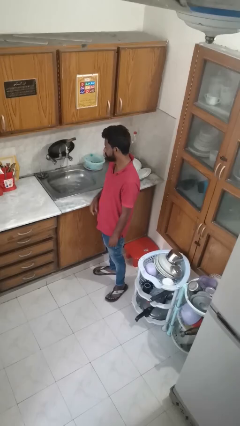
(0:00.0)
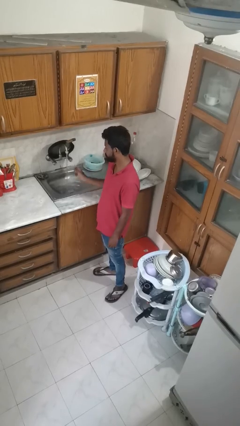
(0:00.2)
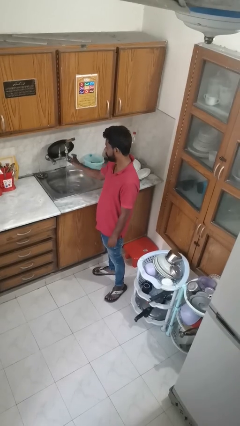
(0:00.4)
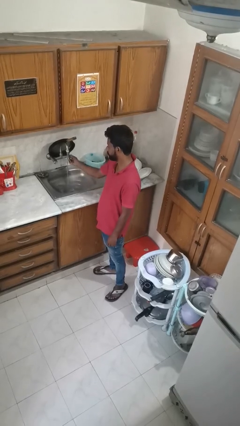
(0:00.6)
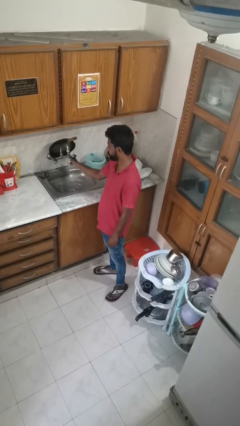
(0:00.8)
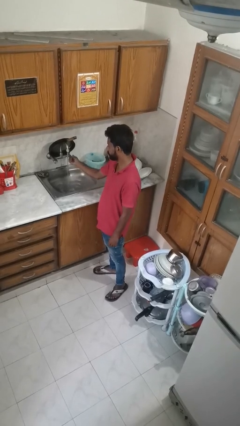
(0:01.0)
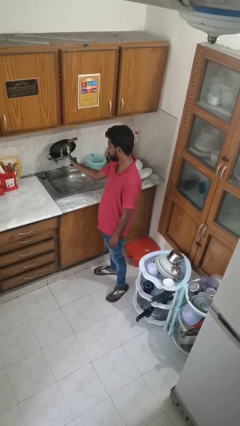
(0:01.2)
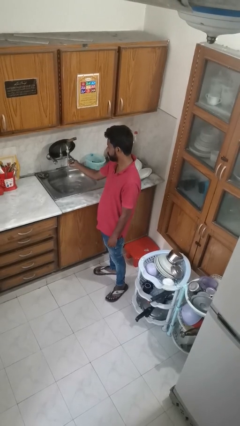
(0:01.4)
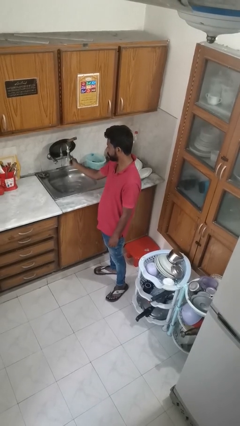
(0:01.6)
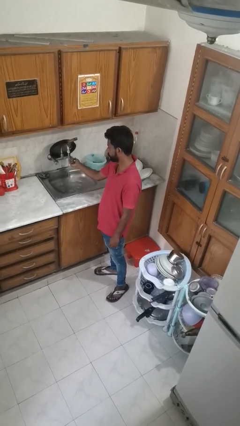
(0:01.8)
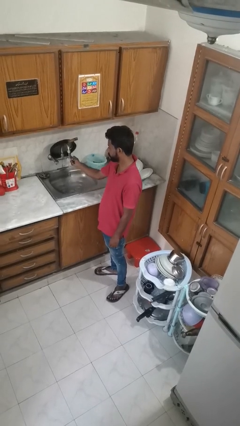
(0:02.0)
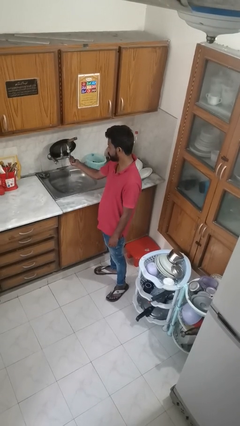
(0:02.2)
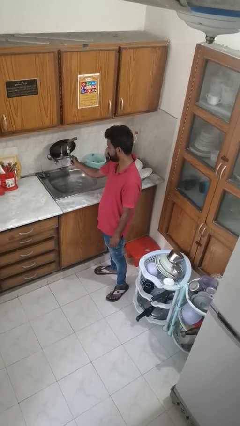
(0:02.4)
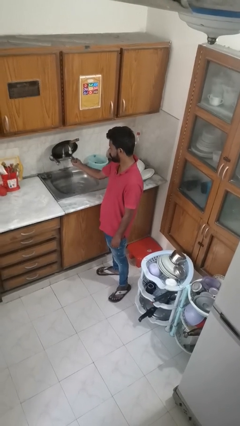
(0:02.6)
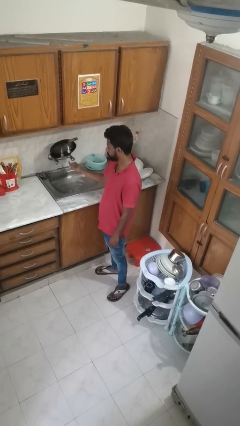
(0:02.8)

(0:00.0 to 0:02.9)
person turns off faucet

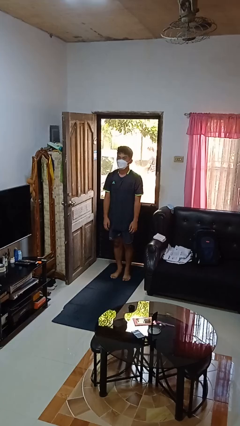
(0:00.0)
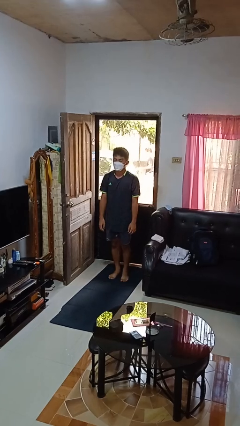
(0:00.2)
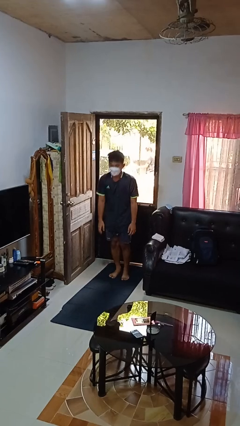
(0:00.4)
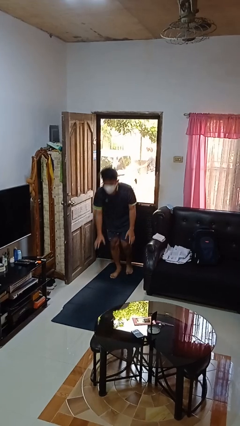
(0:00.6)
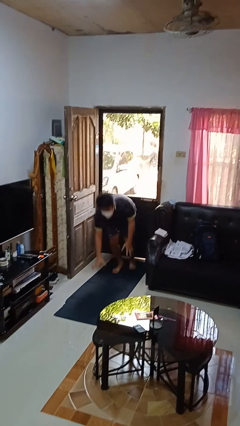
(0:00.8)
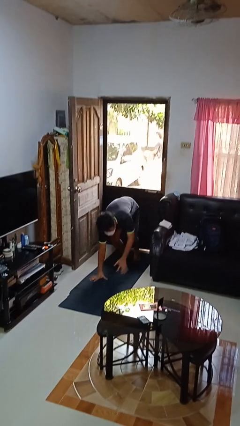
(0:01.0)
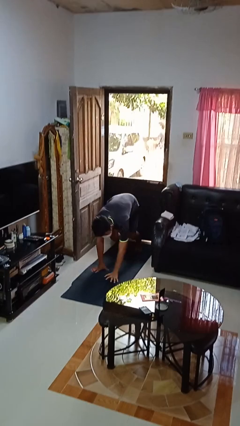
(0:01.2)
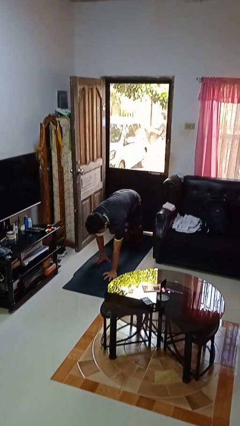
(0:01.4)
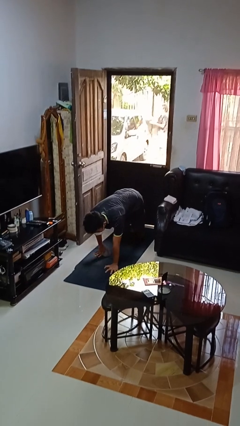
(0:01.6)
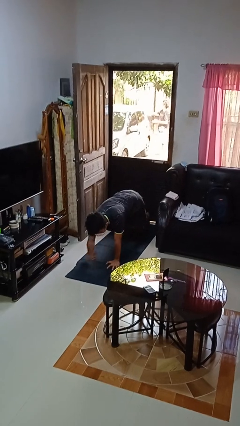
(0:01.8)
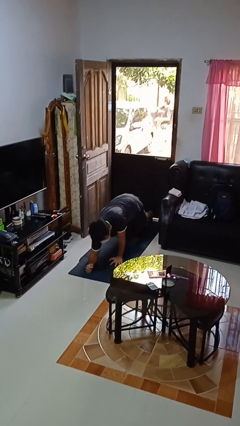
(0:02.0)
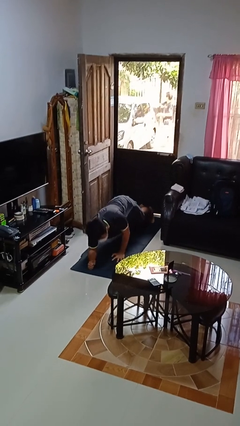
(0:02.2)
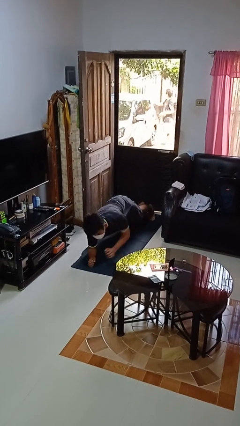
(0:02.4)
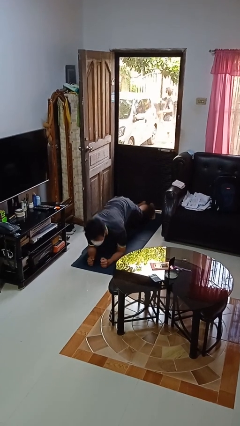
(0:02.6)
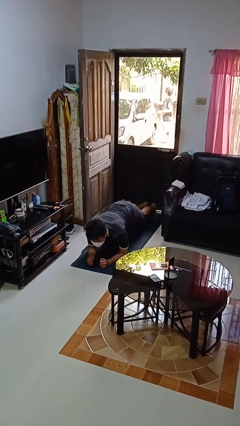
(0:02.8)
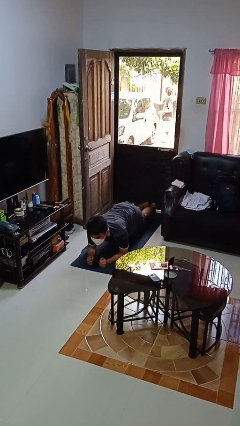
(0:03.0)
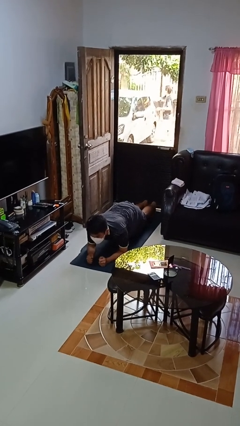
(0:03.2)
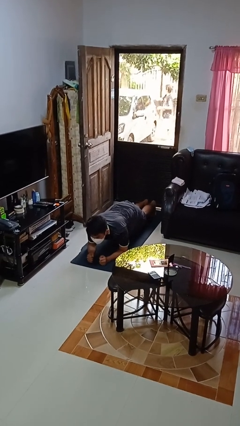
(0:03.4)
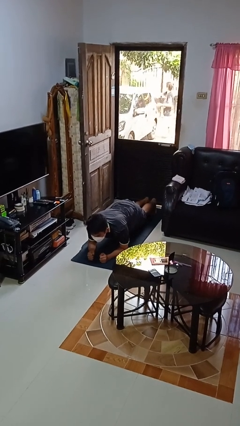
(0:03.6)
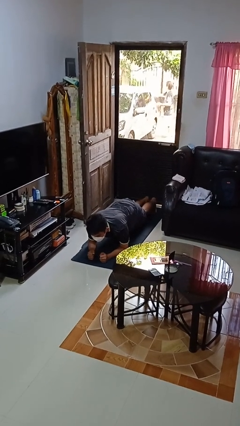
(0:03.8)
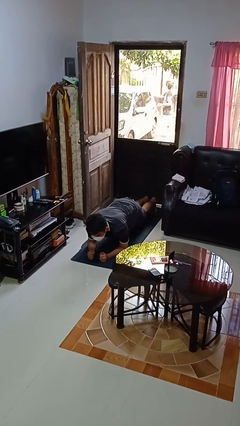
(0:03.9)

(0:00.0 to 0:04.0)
person exercises with plank

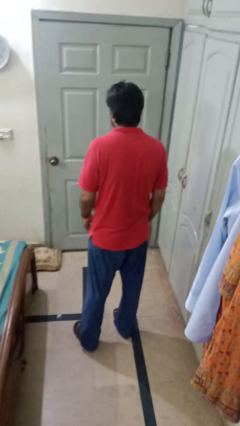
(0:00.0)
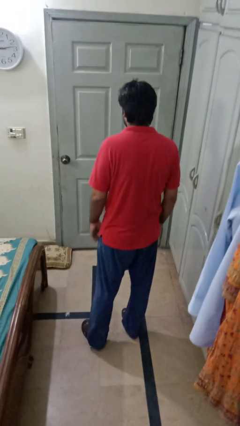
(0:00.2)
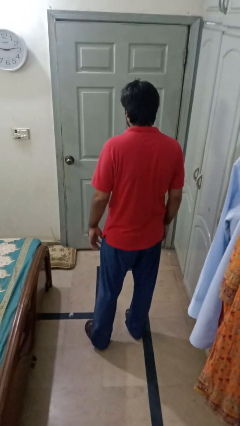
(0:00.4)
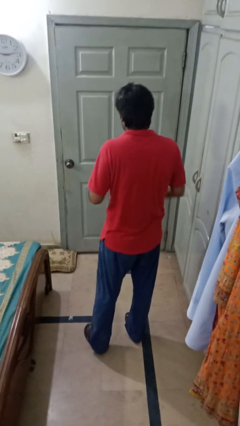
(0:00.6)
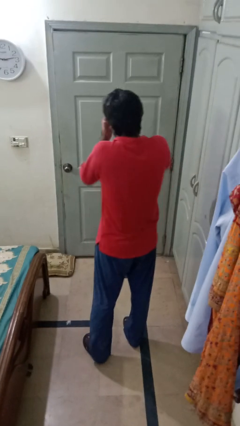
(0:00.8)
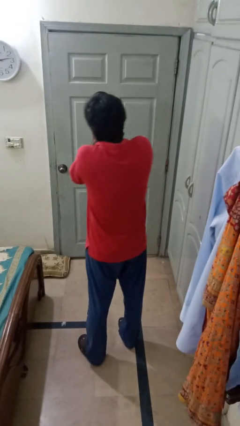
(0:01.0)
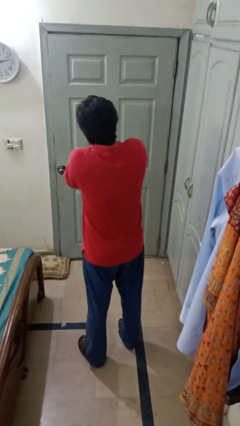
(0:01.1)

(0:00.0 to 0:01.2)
person covers face with hands

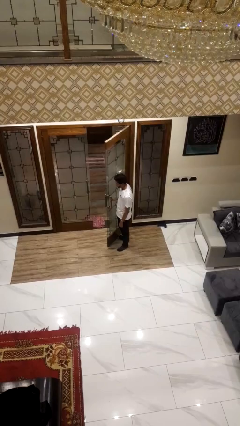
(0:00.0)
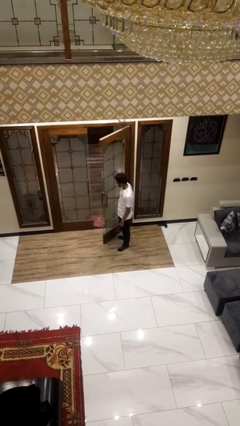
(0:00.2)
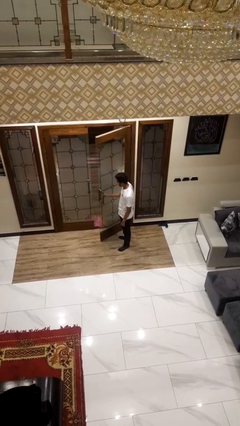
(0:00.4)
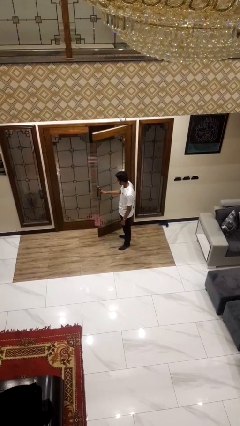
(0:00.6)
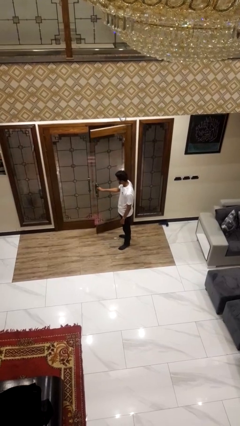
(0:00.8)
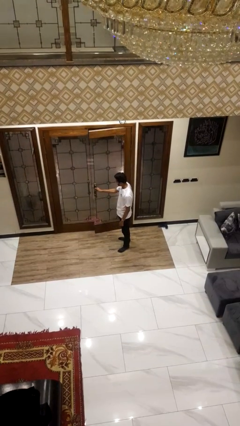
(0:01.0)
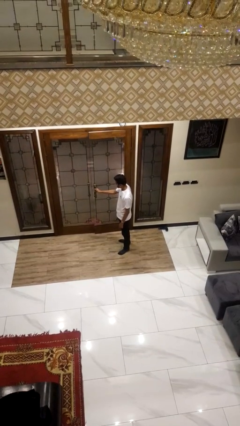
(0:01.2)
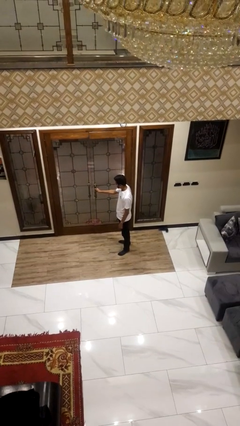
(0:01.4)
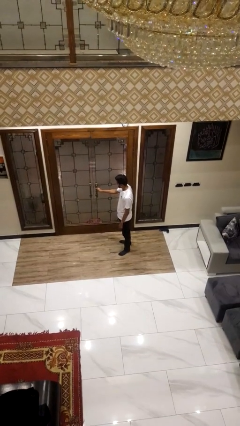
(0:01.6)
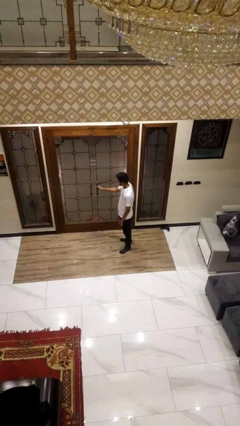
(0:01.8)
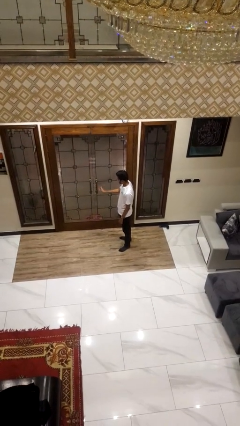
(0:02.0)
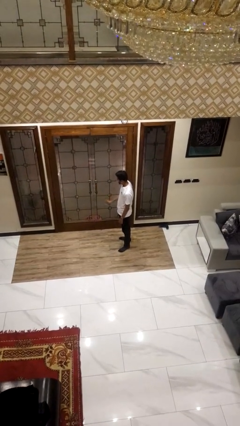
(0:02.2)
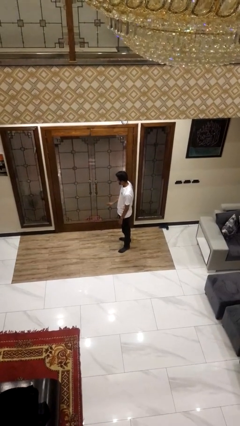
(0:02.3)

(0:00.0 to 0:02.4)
person closes facility door

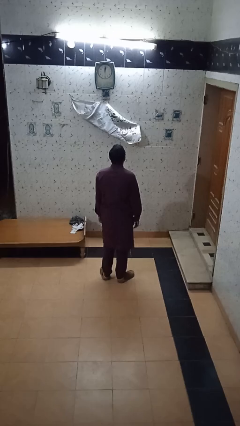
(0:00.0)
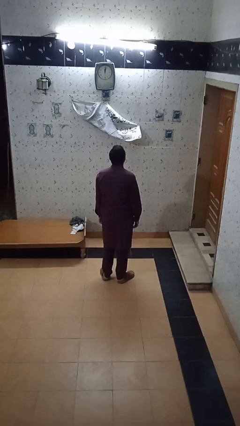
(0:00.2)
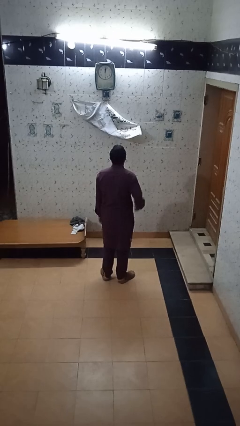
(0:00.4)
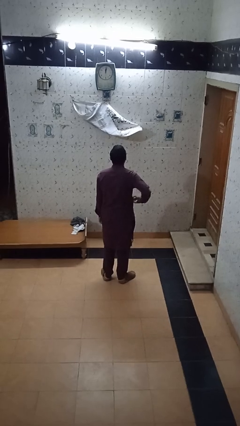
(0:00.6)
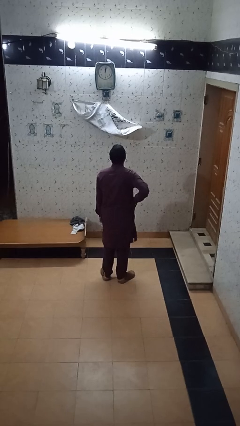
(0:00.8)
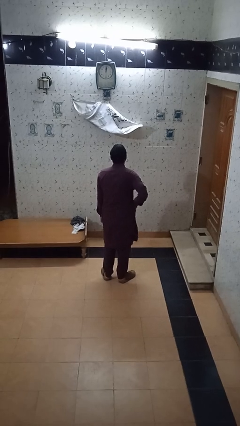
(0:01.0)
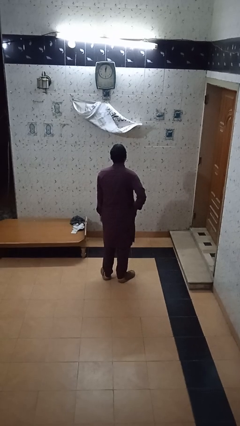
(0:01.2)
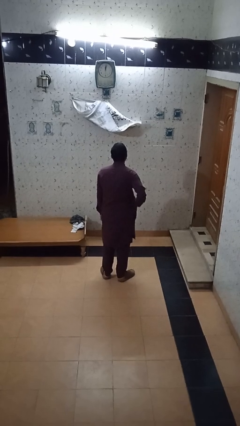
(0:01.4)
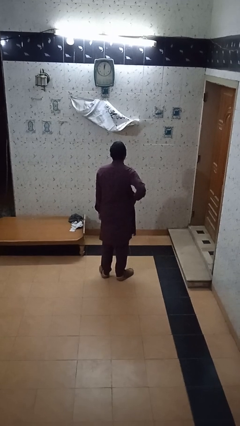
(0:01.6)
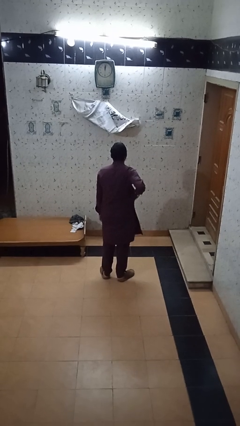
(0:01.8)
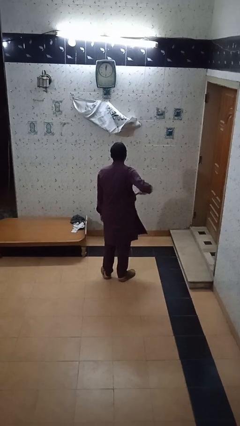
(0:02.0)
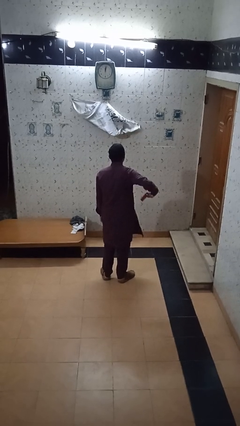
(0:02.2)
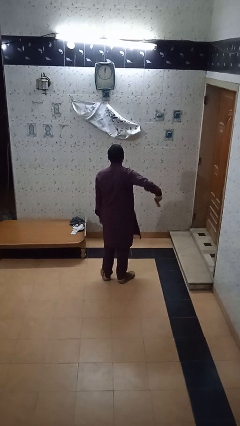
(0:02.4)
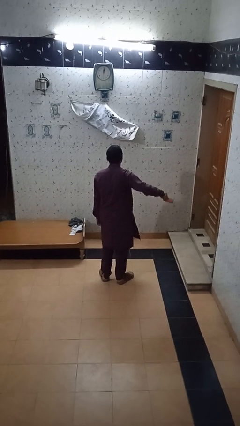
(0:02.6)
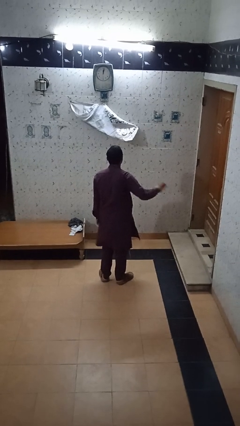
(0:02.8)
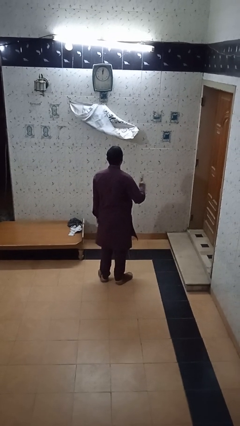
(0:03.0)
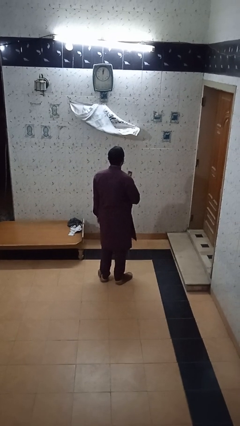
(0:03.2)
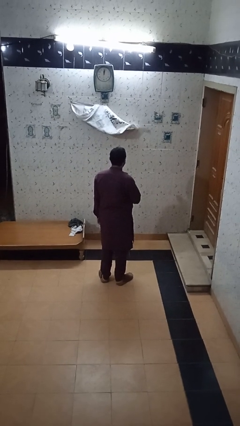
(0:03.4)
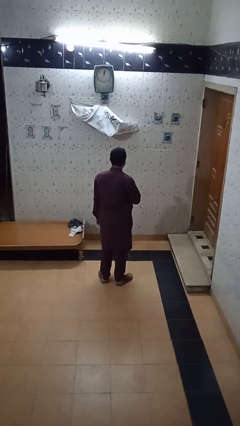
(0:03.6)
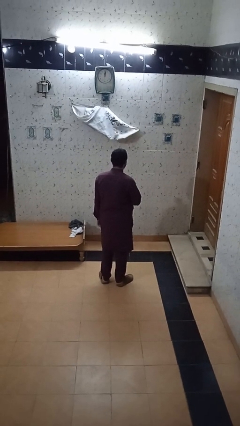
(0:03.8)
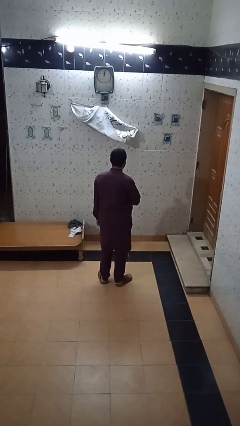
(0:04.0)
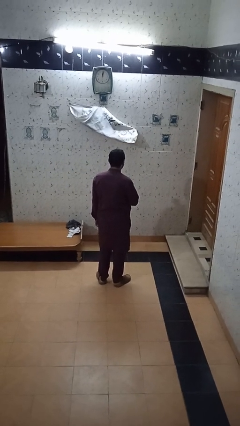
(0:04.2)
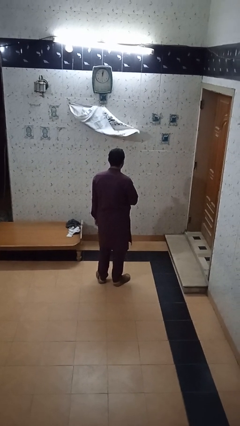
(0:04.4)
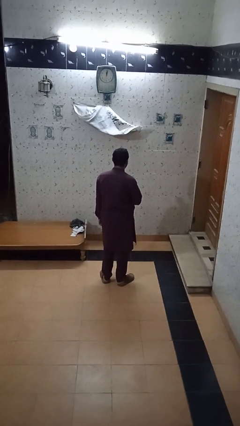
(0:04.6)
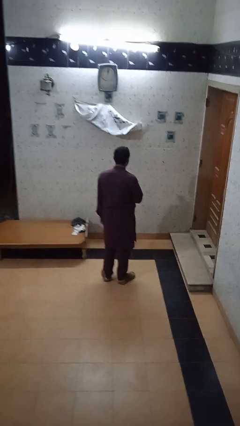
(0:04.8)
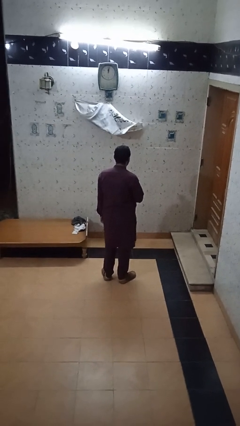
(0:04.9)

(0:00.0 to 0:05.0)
person takes phone from pocket

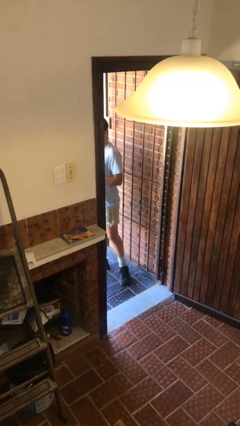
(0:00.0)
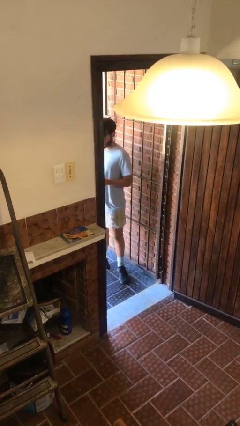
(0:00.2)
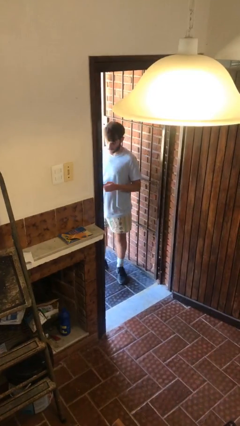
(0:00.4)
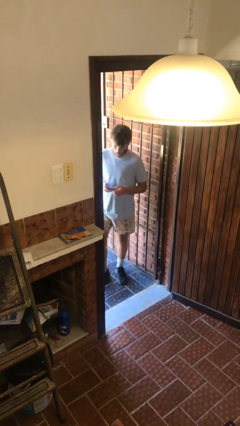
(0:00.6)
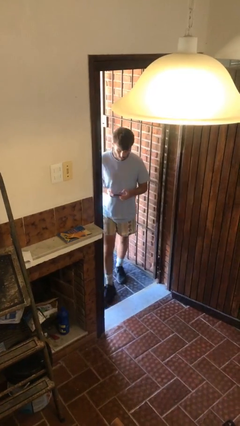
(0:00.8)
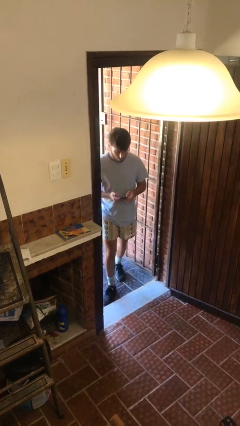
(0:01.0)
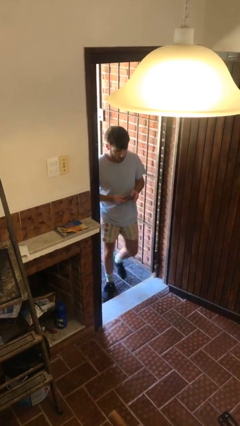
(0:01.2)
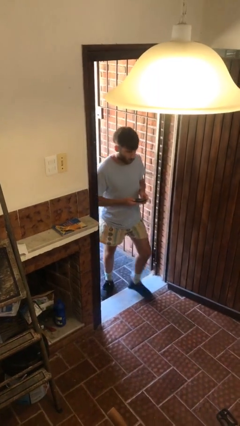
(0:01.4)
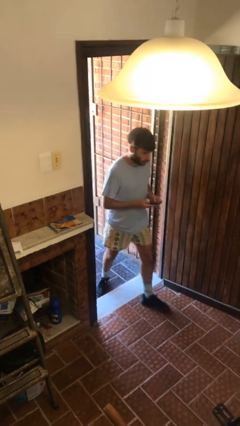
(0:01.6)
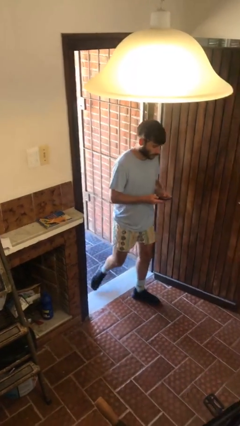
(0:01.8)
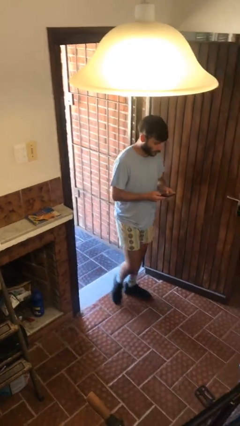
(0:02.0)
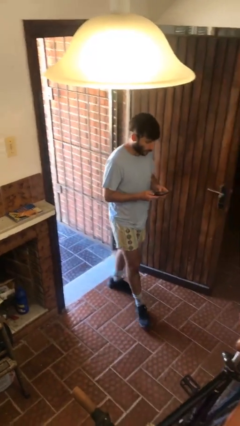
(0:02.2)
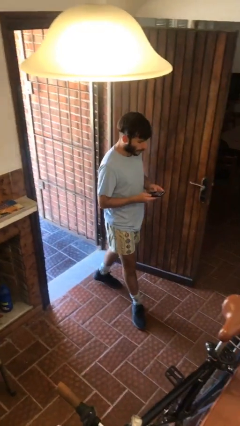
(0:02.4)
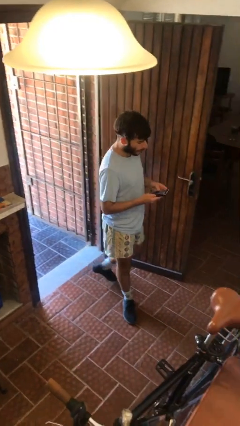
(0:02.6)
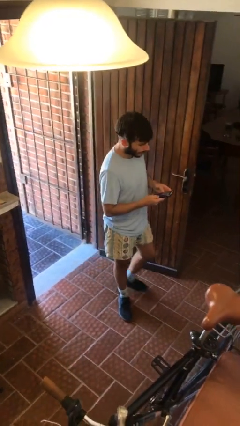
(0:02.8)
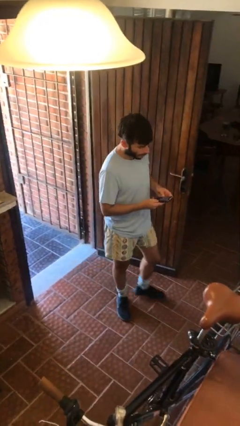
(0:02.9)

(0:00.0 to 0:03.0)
person enters scene through structure
